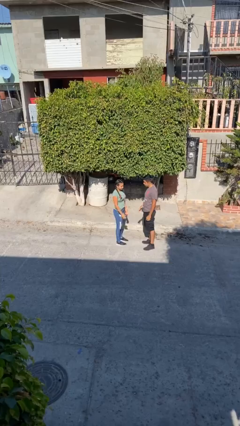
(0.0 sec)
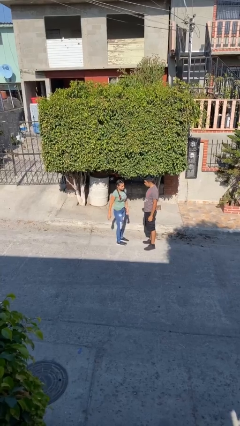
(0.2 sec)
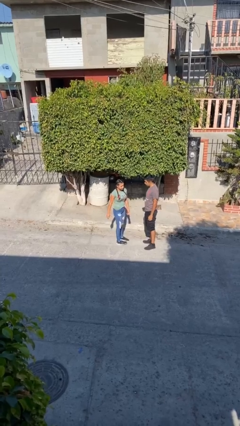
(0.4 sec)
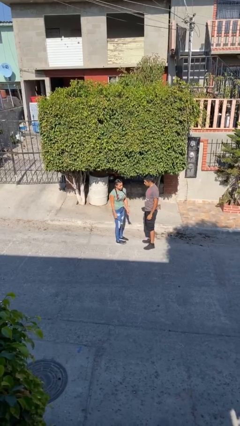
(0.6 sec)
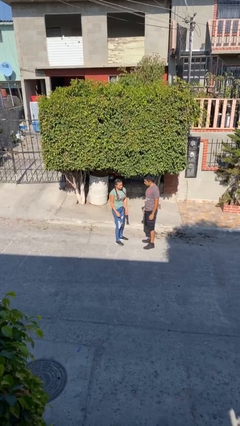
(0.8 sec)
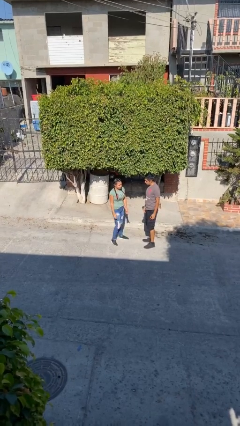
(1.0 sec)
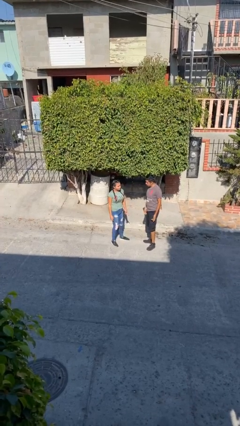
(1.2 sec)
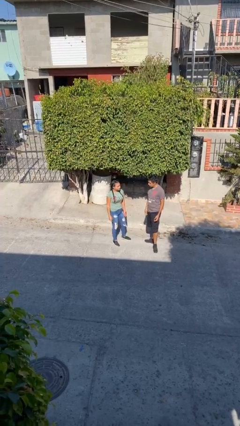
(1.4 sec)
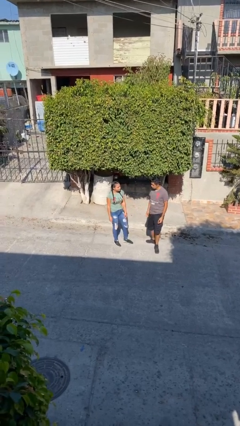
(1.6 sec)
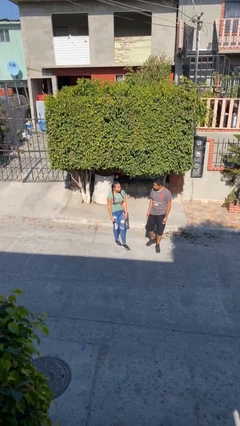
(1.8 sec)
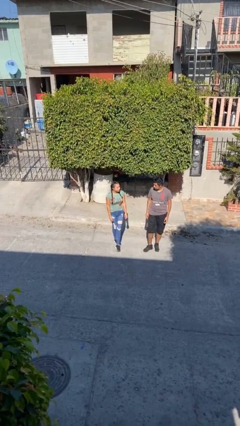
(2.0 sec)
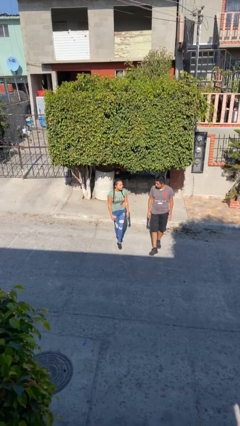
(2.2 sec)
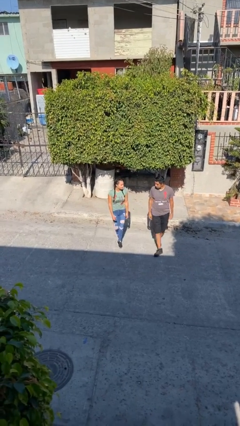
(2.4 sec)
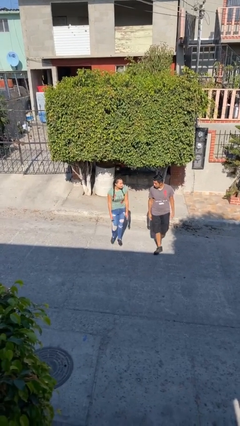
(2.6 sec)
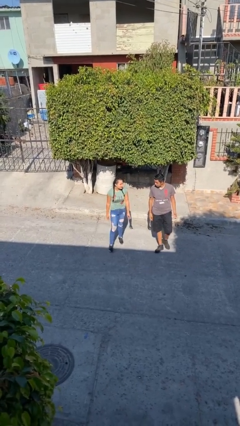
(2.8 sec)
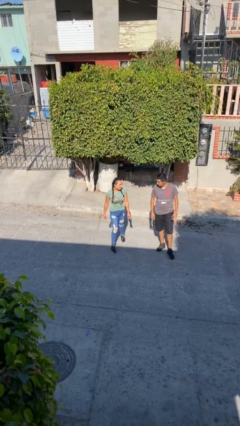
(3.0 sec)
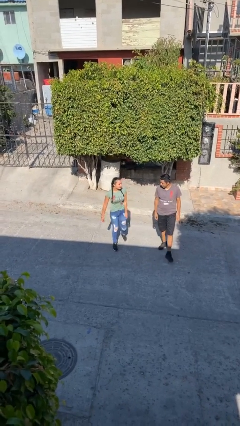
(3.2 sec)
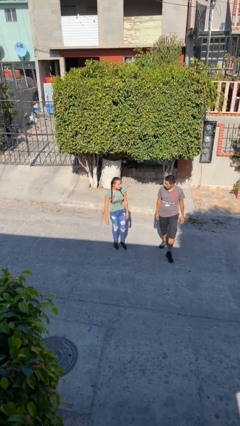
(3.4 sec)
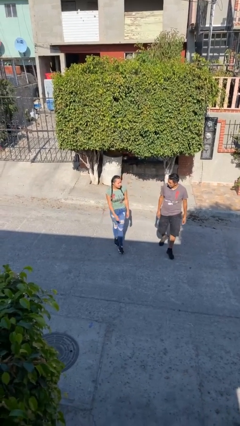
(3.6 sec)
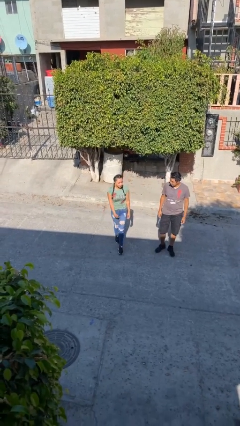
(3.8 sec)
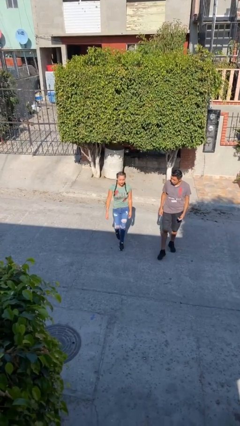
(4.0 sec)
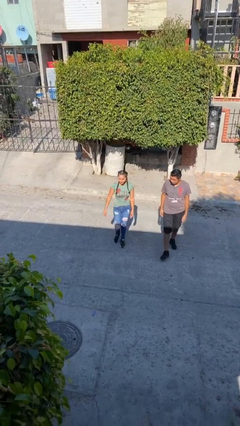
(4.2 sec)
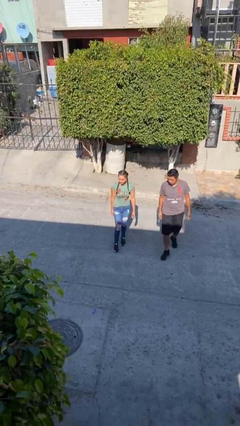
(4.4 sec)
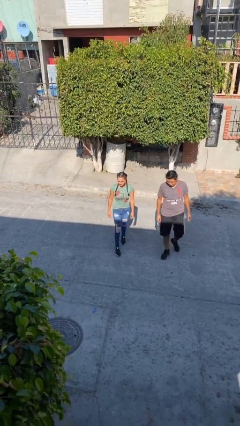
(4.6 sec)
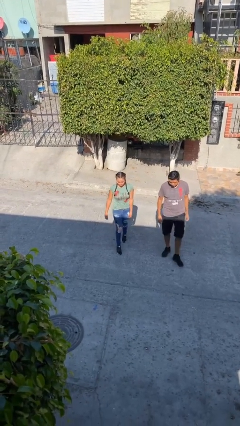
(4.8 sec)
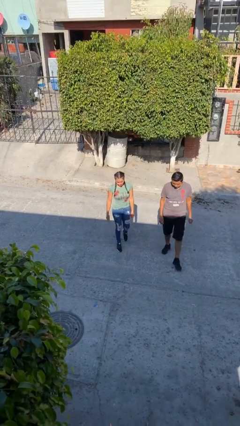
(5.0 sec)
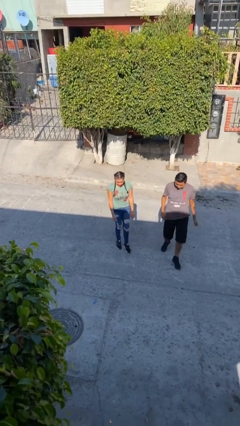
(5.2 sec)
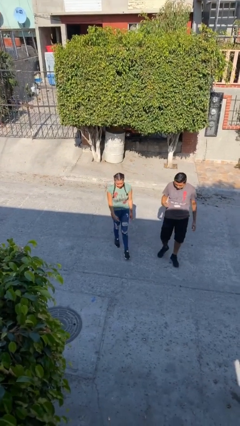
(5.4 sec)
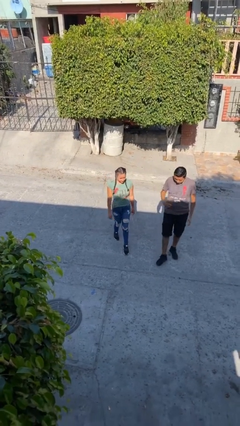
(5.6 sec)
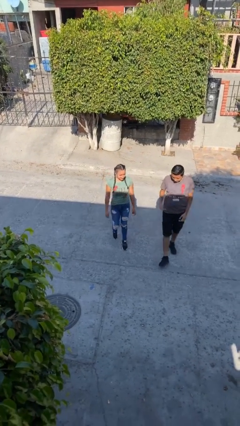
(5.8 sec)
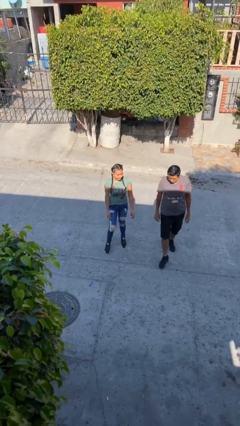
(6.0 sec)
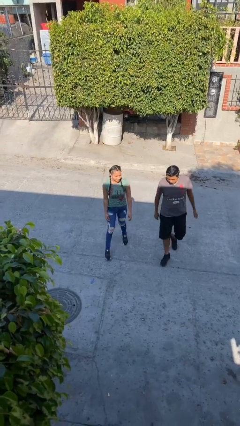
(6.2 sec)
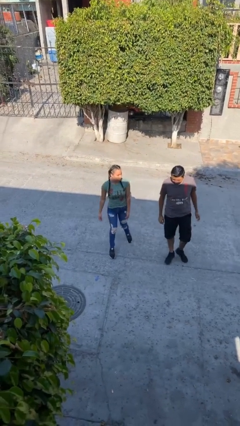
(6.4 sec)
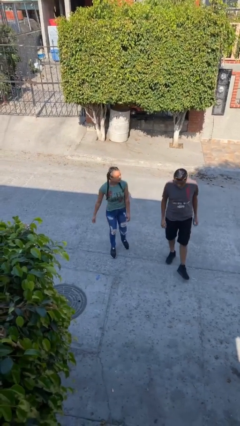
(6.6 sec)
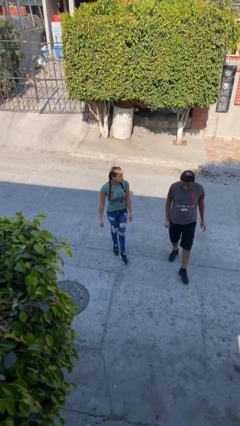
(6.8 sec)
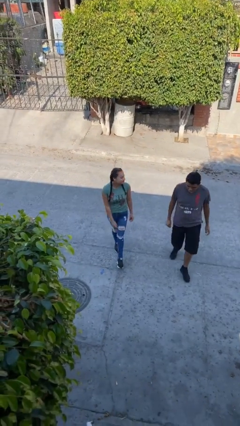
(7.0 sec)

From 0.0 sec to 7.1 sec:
person talks to person

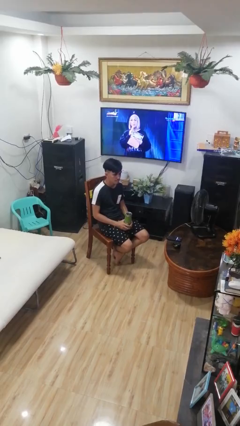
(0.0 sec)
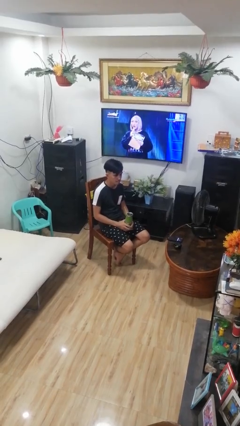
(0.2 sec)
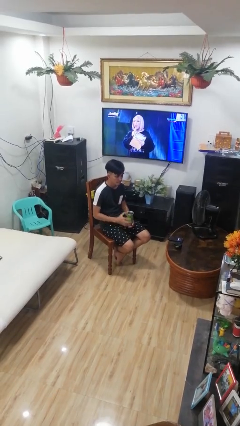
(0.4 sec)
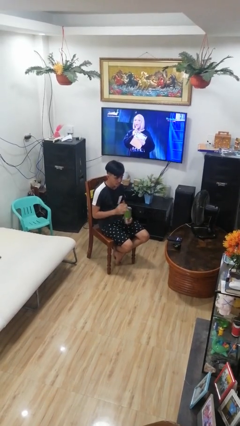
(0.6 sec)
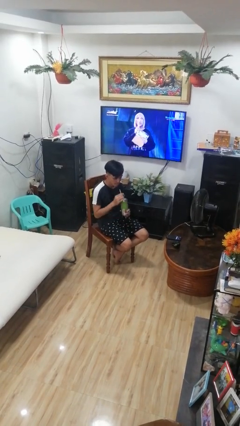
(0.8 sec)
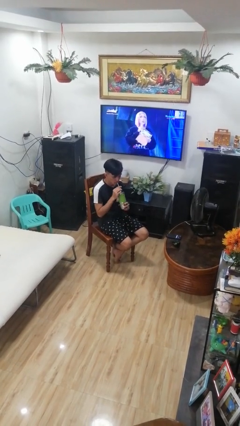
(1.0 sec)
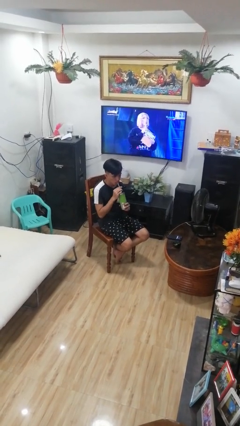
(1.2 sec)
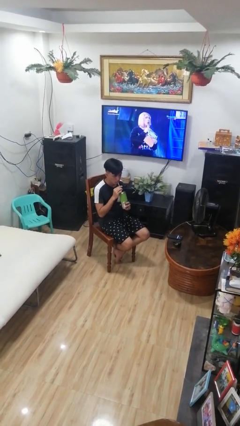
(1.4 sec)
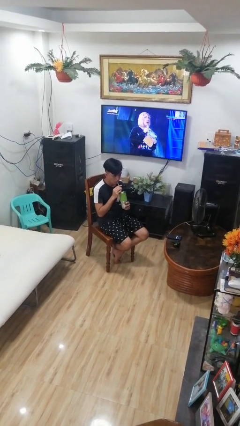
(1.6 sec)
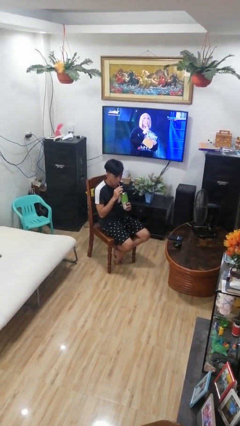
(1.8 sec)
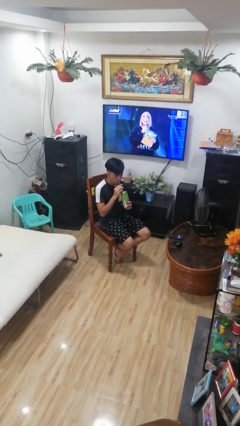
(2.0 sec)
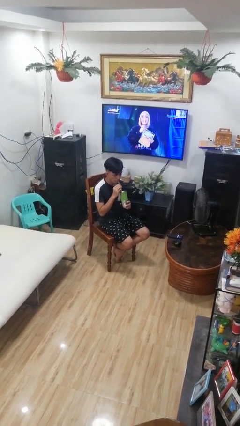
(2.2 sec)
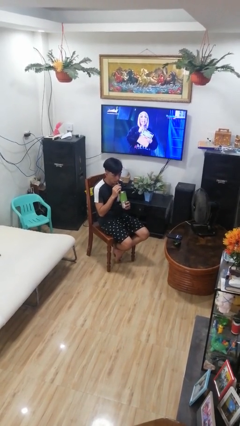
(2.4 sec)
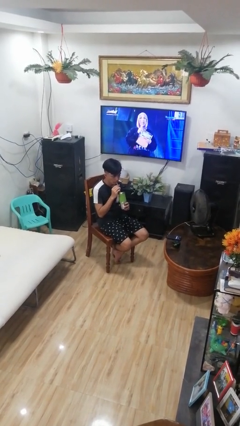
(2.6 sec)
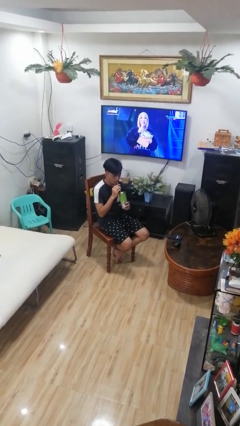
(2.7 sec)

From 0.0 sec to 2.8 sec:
person drinks from straw

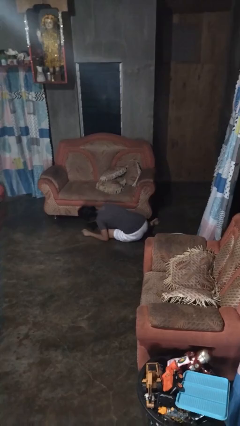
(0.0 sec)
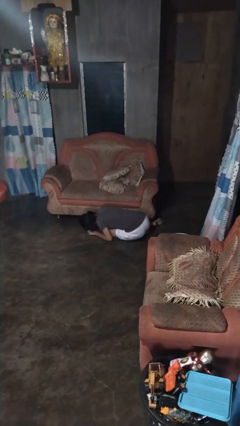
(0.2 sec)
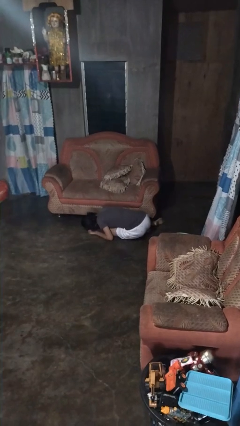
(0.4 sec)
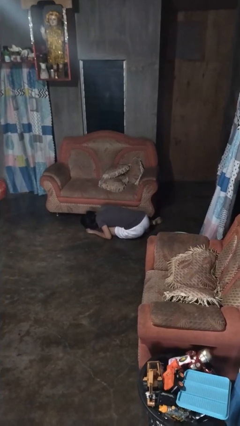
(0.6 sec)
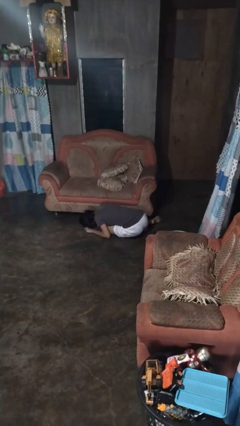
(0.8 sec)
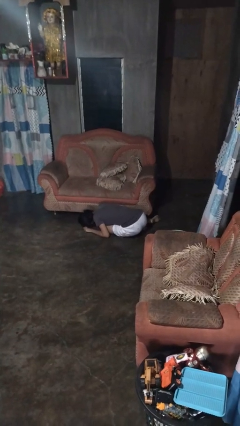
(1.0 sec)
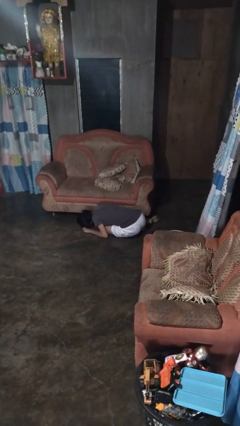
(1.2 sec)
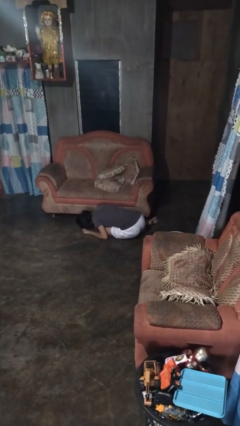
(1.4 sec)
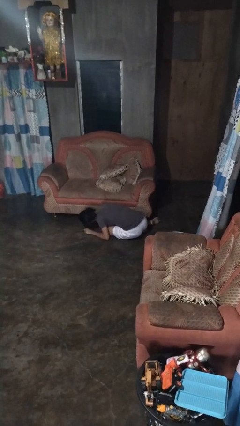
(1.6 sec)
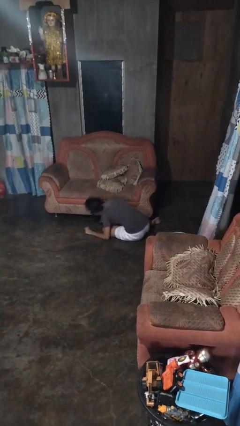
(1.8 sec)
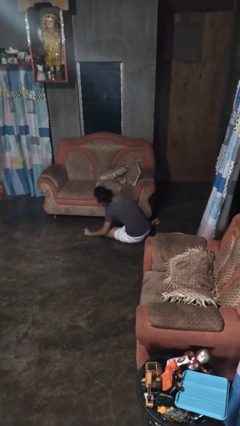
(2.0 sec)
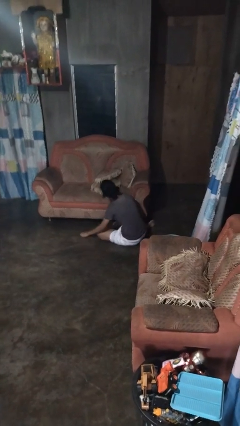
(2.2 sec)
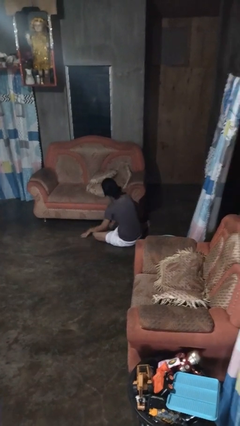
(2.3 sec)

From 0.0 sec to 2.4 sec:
person searches under couch

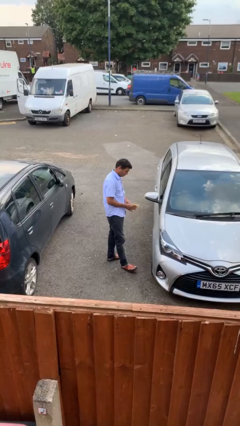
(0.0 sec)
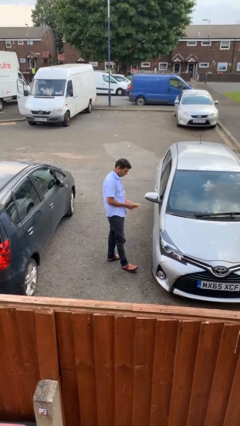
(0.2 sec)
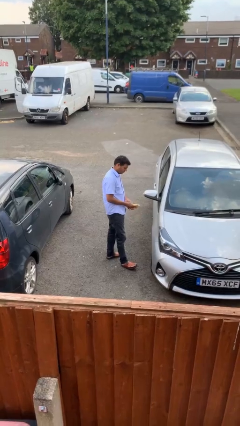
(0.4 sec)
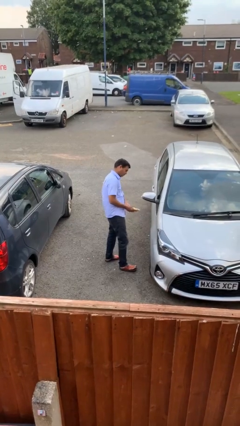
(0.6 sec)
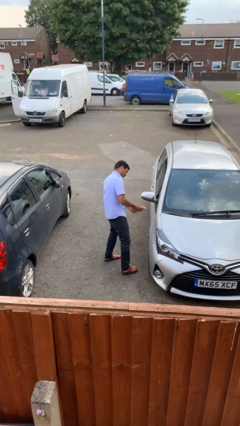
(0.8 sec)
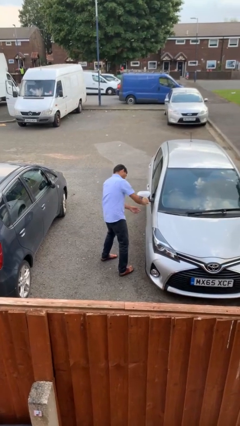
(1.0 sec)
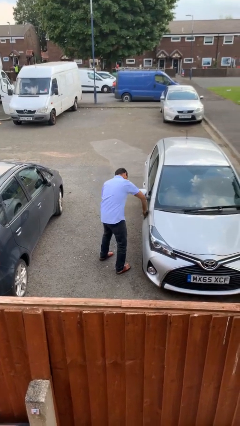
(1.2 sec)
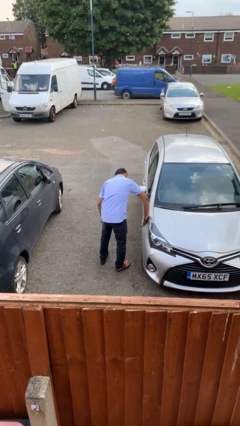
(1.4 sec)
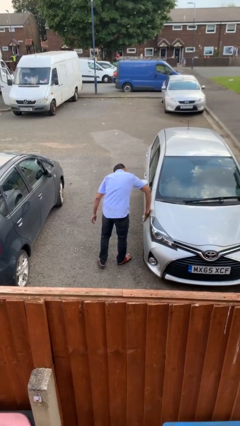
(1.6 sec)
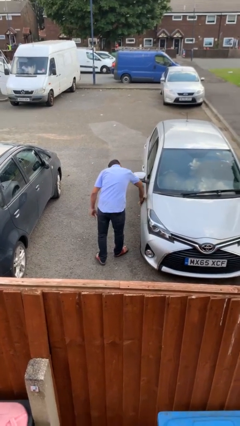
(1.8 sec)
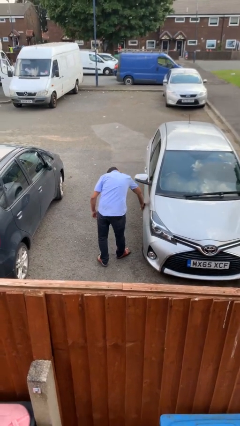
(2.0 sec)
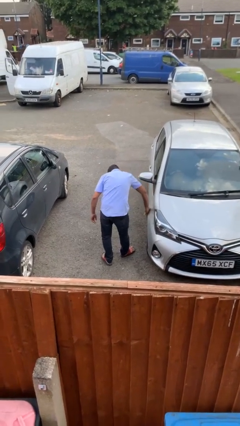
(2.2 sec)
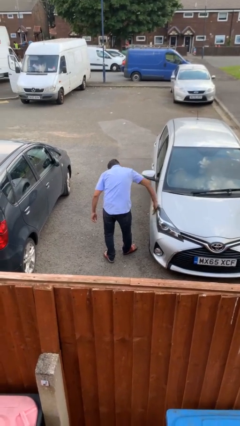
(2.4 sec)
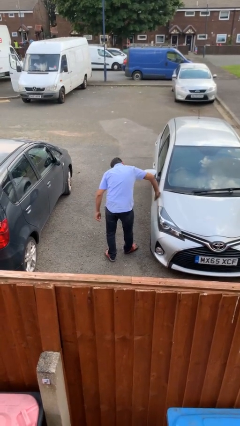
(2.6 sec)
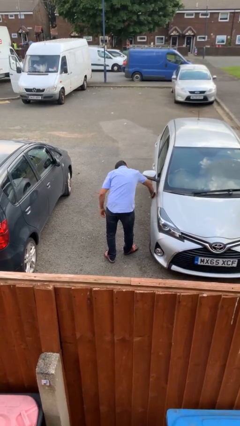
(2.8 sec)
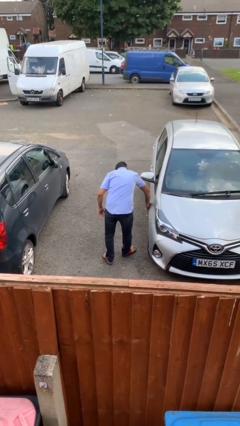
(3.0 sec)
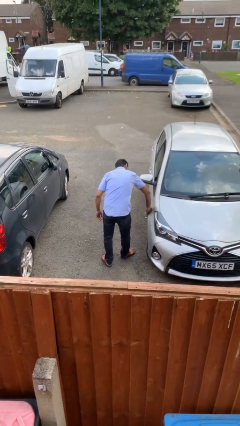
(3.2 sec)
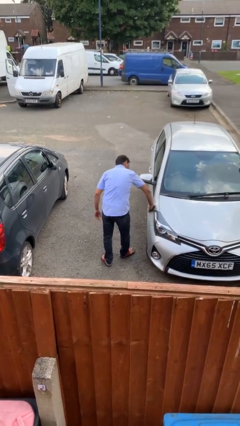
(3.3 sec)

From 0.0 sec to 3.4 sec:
person polishes car with rag

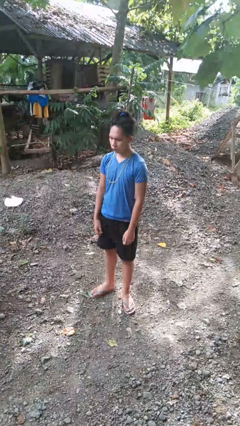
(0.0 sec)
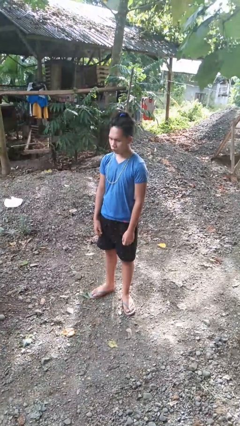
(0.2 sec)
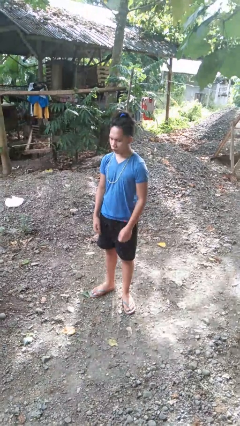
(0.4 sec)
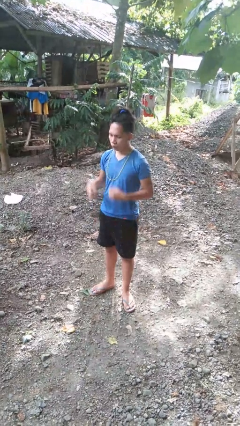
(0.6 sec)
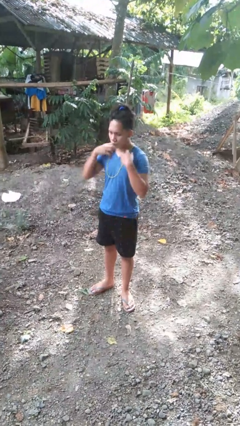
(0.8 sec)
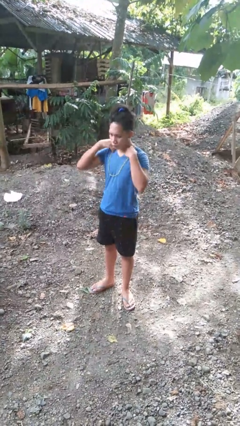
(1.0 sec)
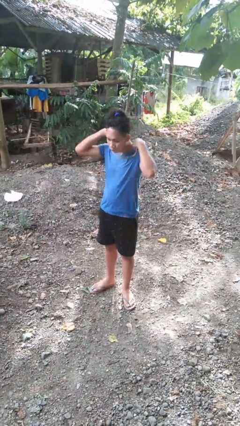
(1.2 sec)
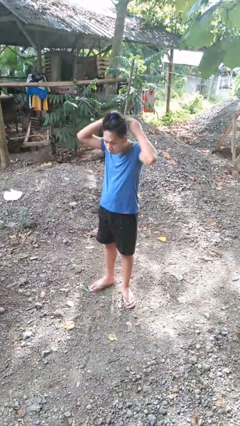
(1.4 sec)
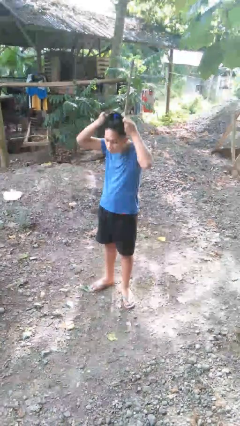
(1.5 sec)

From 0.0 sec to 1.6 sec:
person takes off necklace

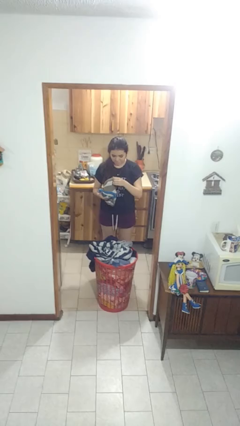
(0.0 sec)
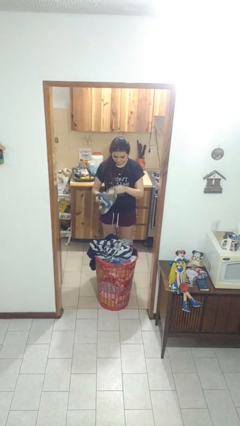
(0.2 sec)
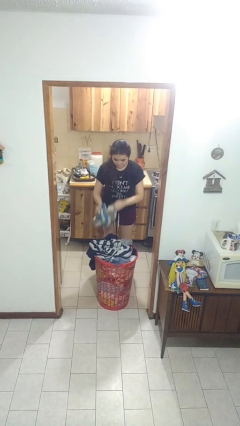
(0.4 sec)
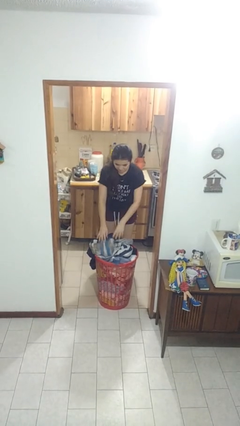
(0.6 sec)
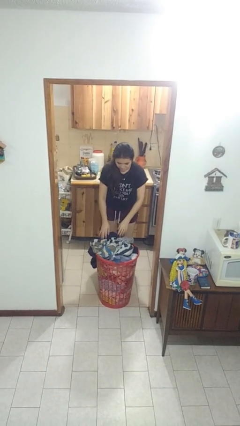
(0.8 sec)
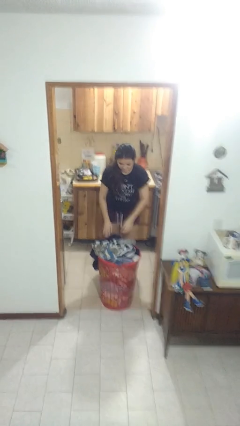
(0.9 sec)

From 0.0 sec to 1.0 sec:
person puts object into basket
